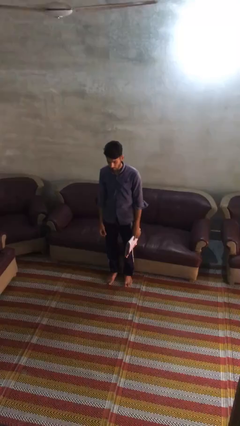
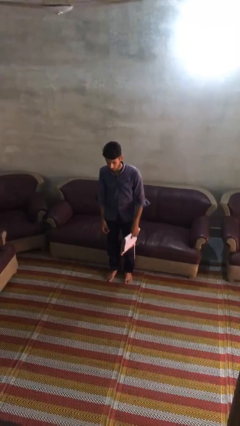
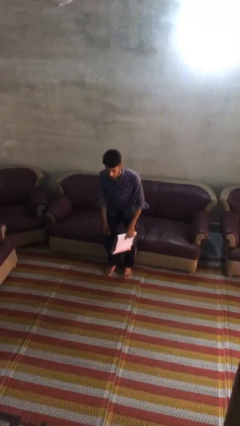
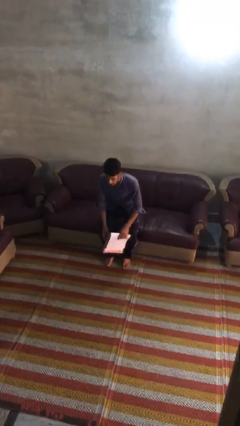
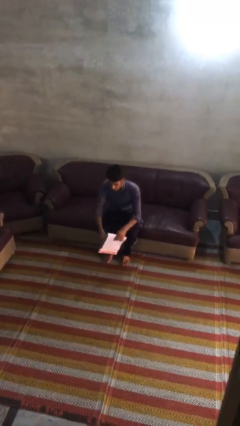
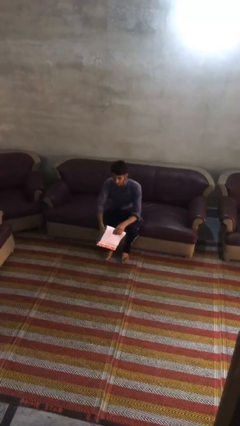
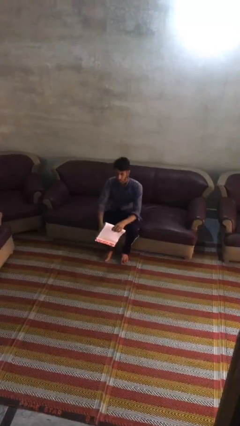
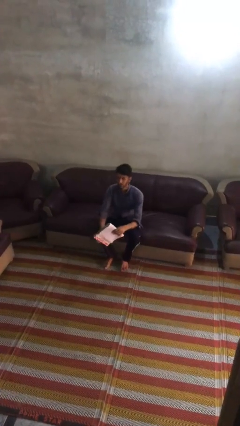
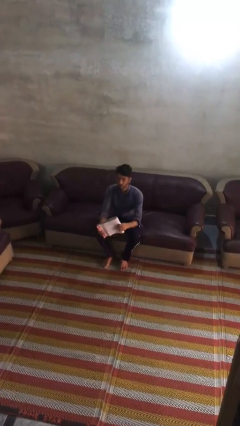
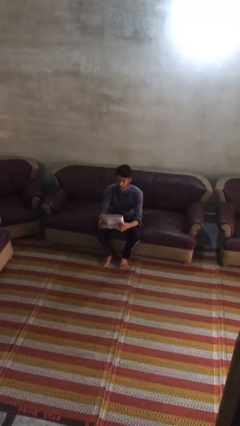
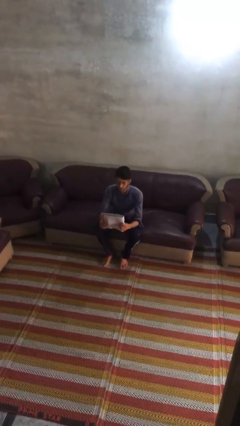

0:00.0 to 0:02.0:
person sits down

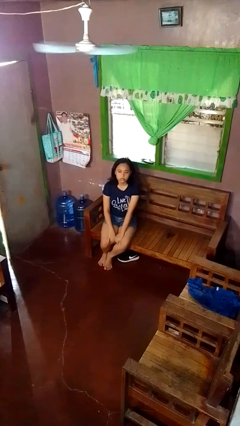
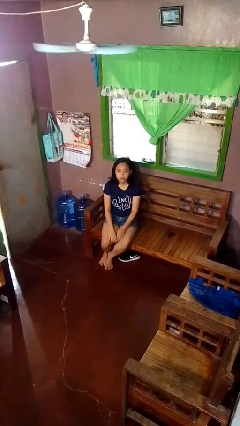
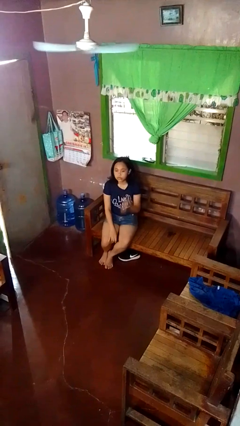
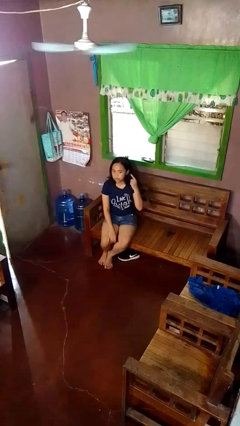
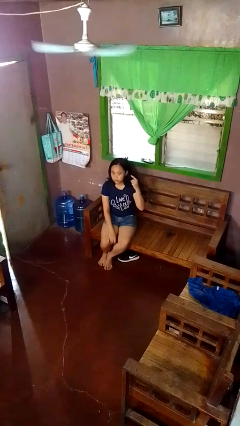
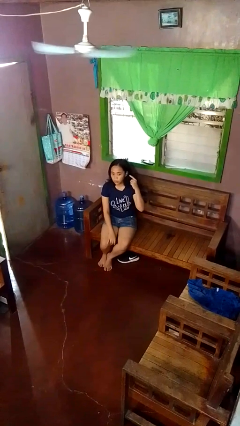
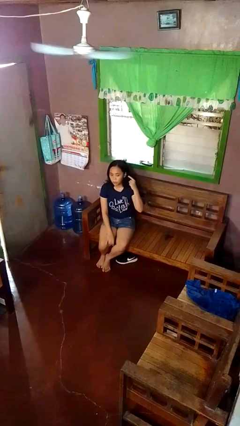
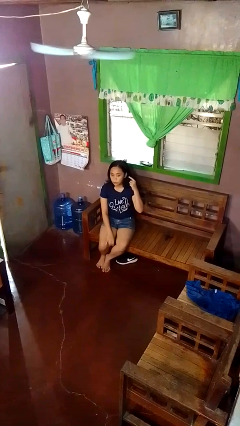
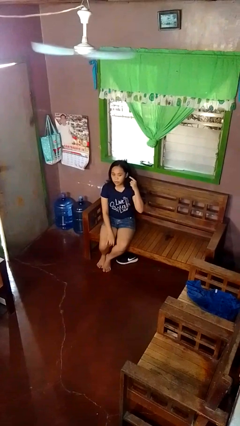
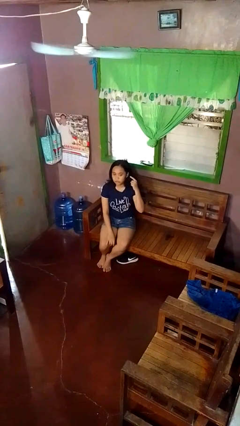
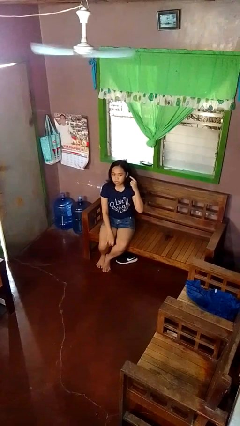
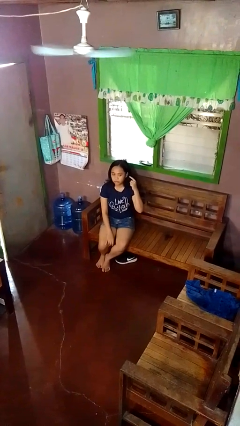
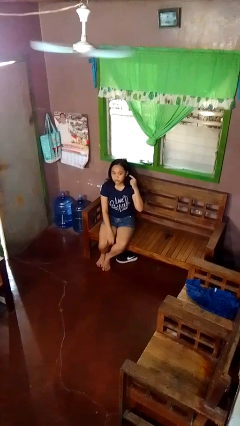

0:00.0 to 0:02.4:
person gestures listen closely

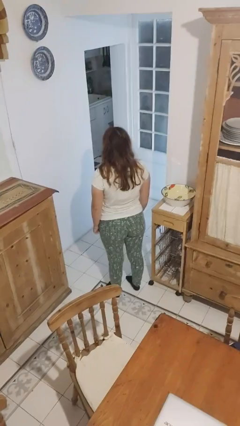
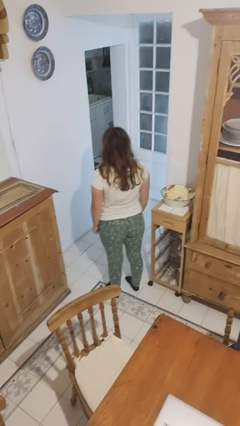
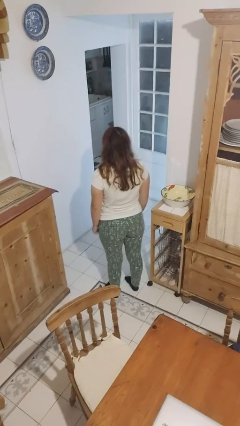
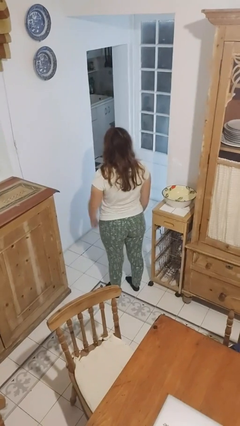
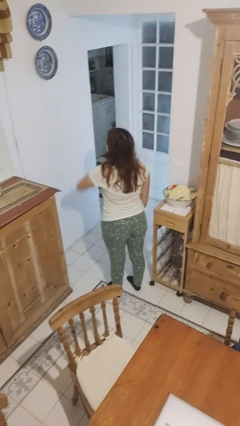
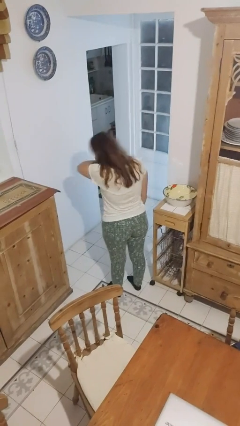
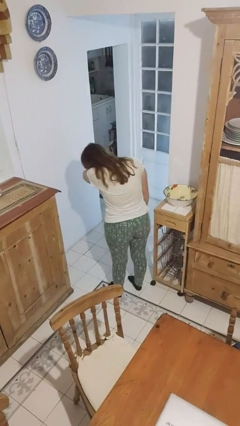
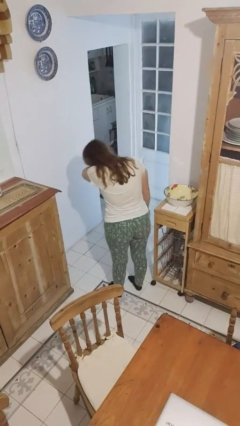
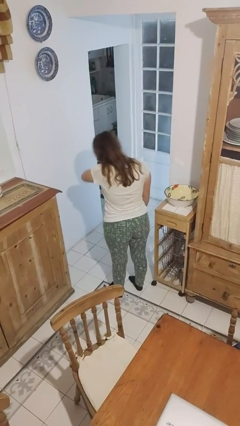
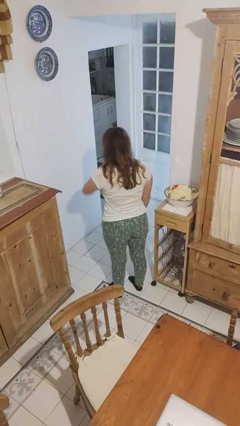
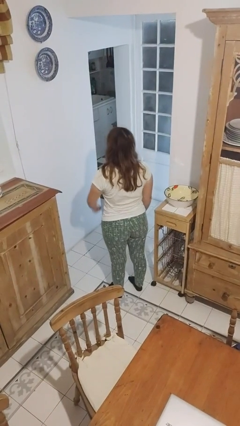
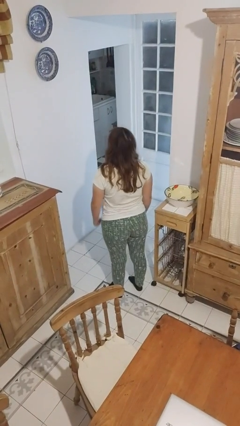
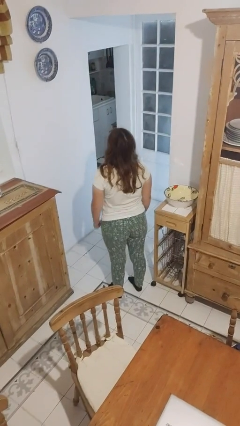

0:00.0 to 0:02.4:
person sneezes into arm

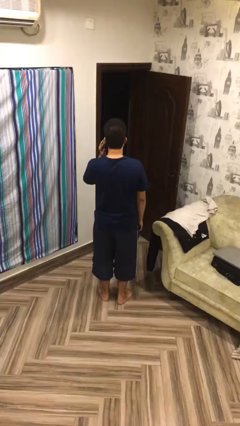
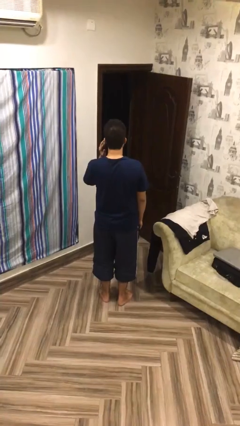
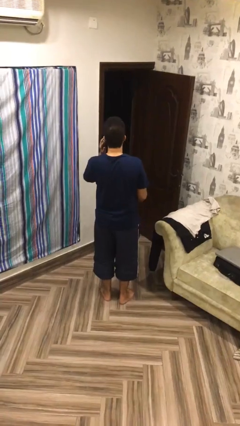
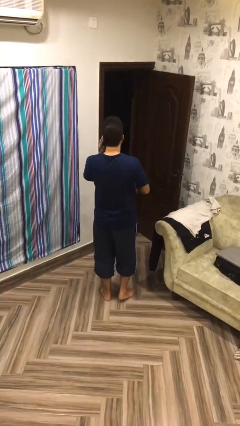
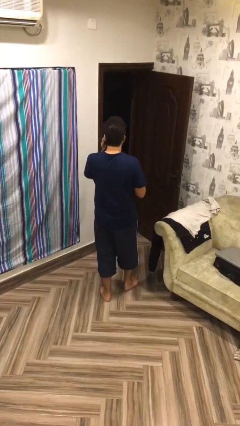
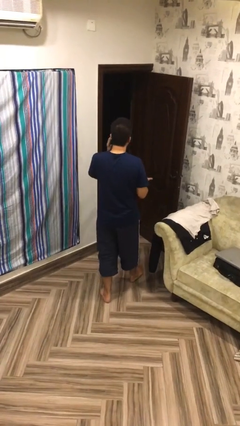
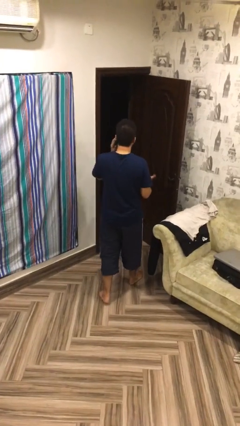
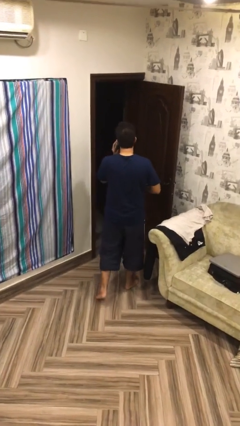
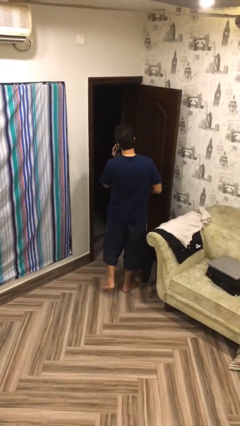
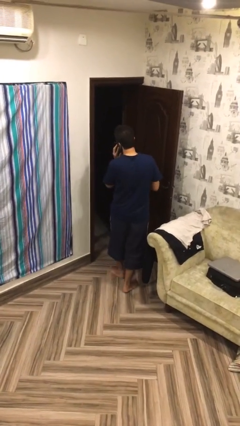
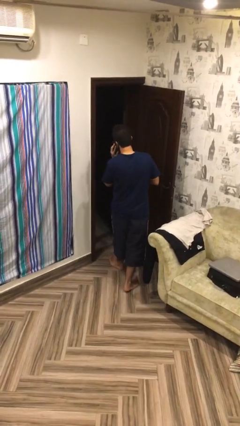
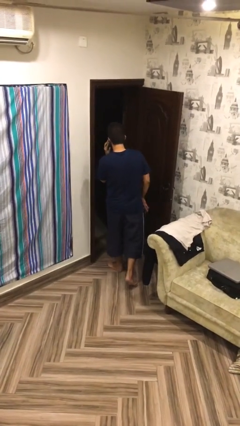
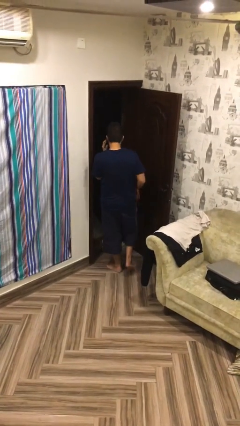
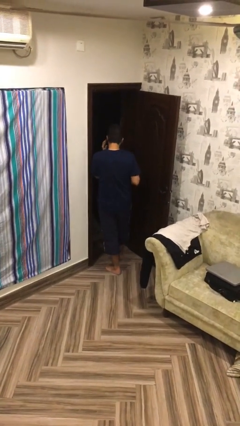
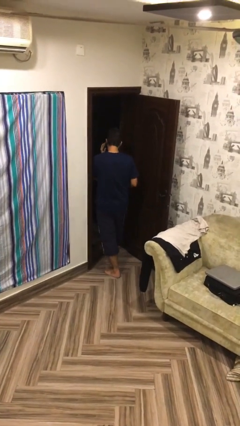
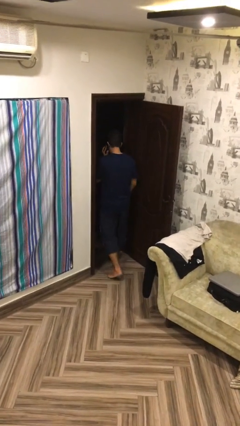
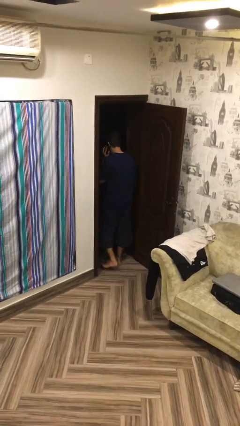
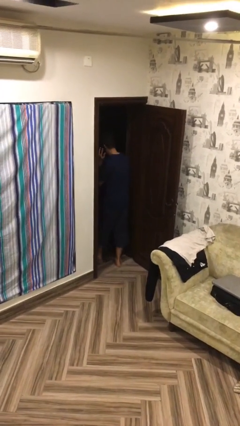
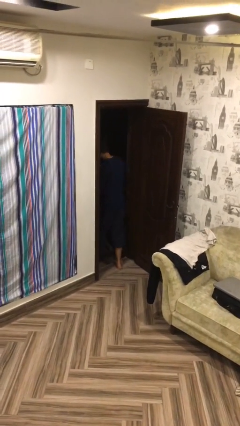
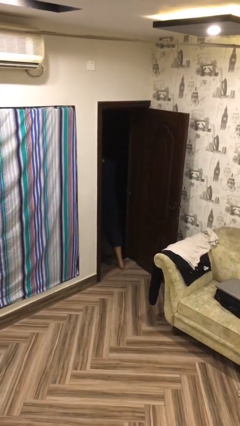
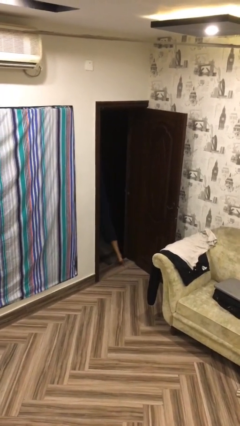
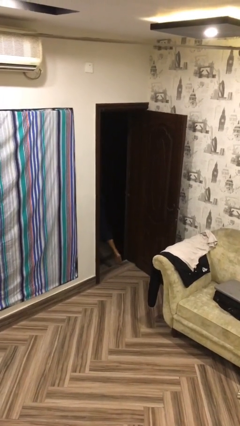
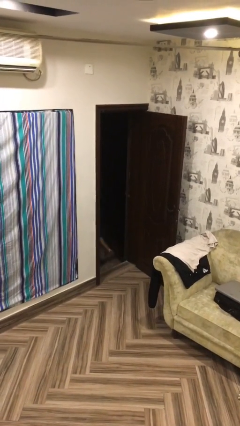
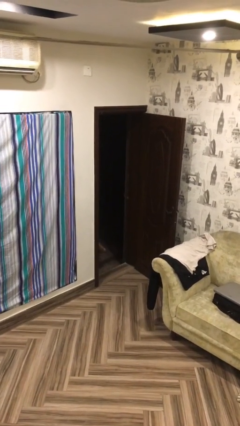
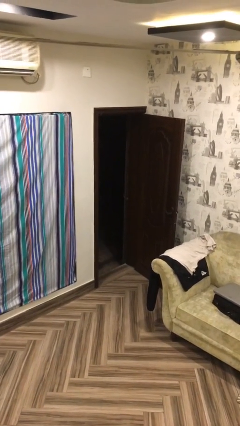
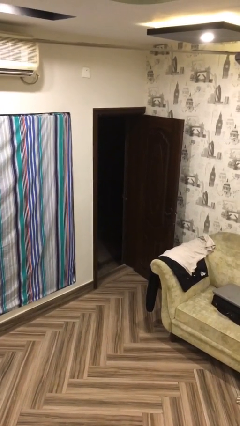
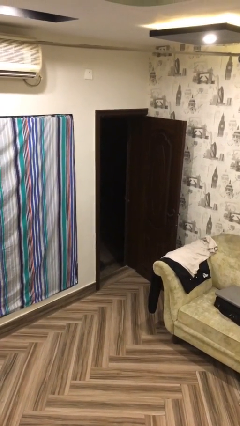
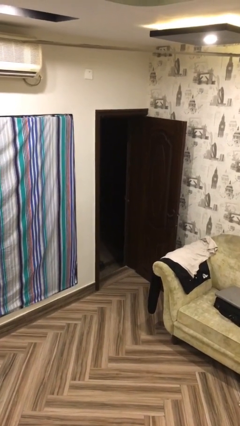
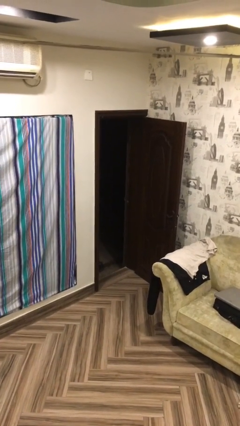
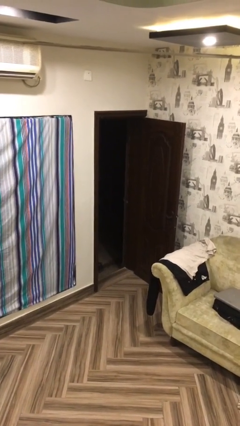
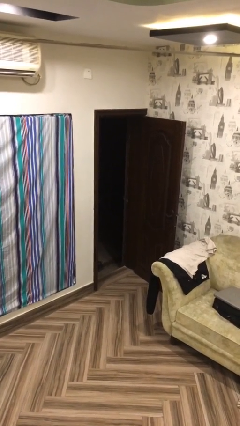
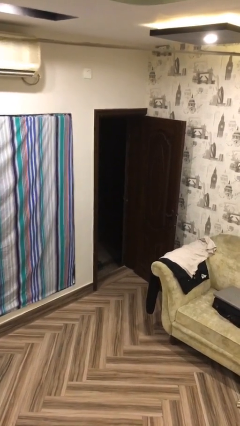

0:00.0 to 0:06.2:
person exits scene through structure

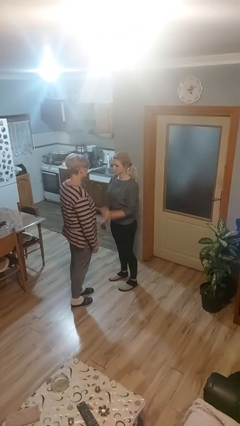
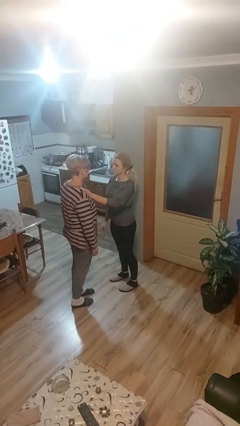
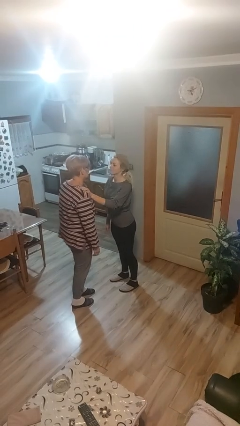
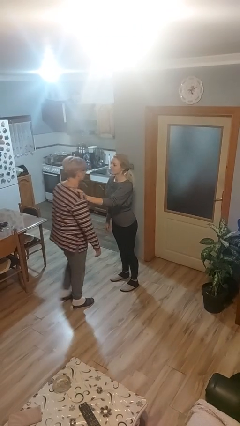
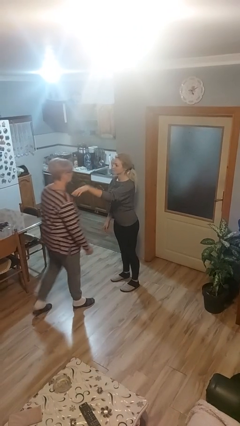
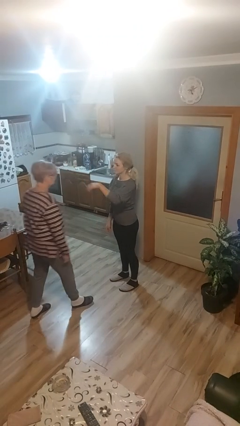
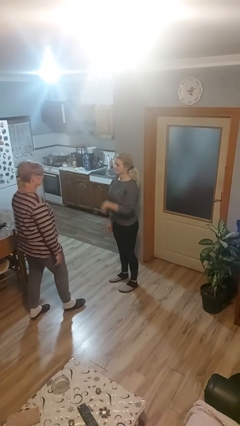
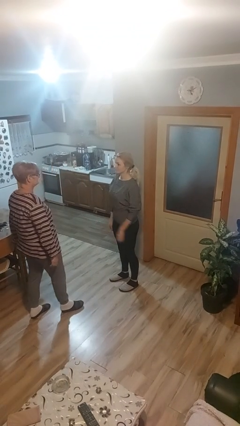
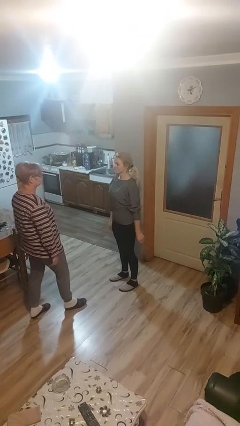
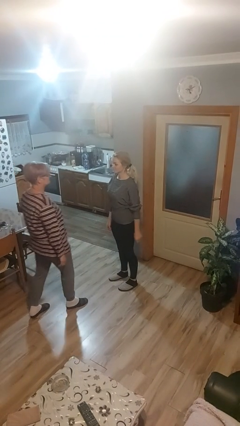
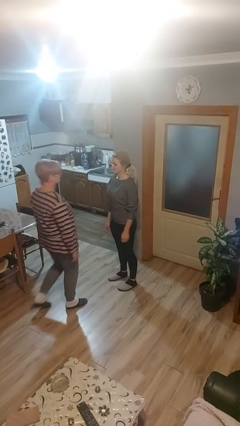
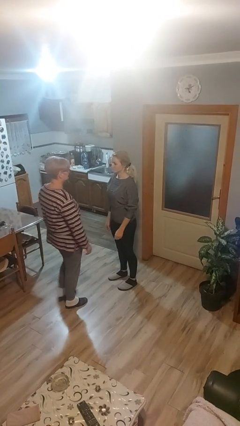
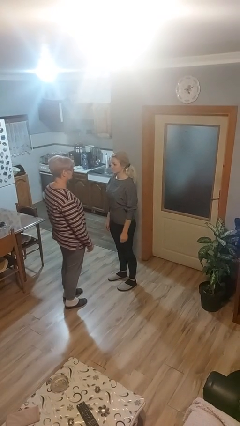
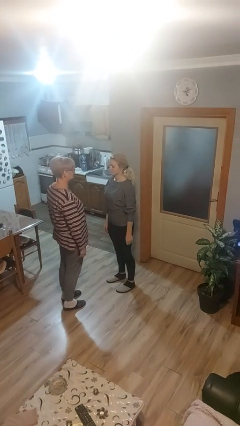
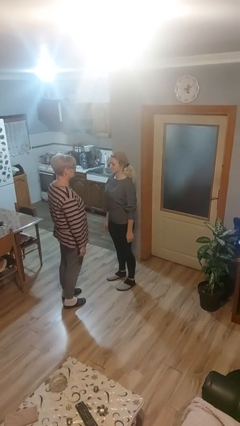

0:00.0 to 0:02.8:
person shoves person

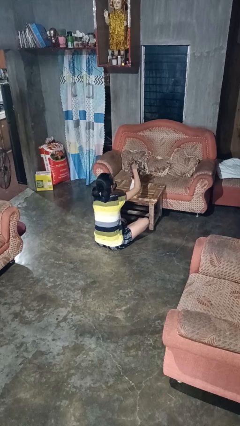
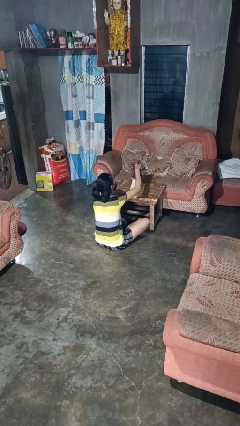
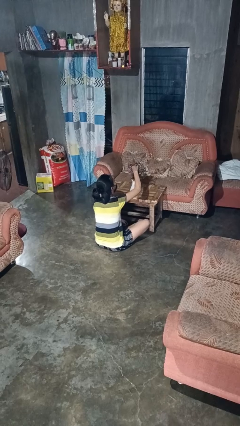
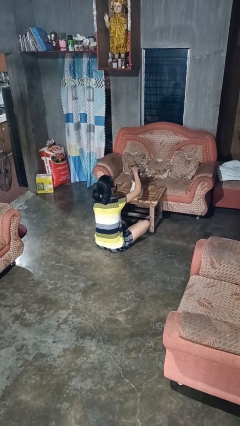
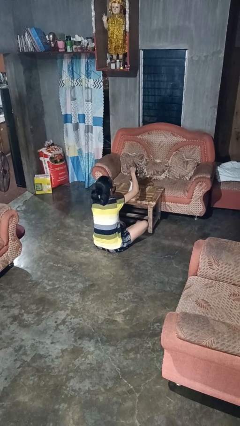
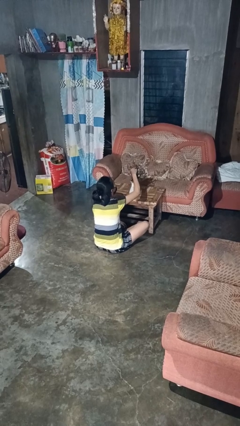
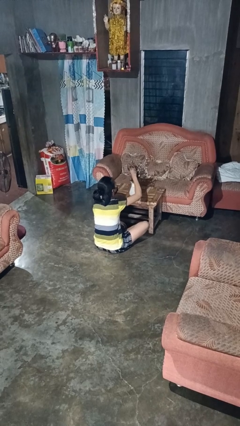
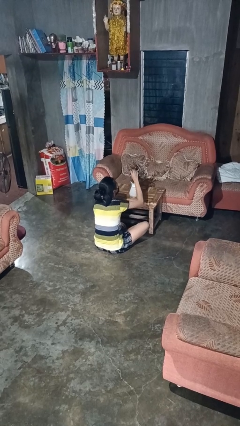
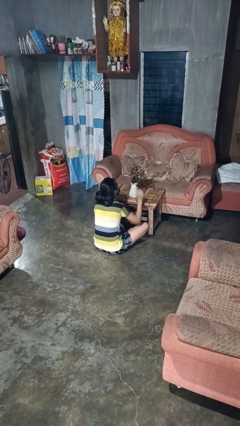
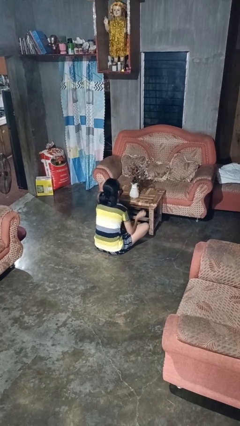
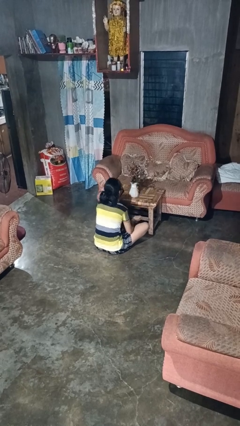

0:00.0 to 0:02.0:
person arranges flowers in vase
